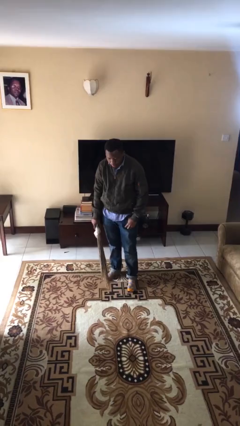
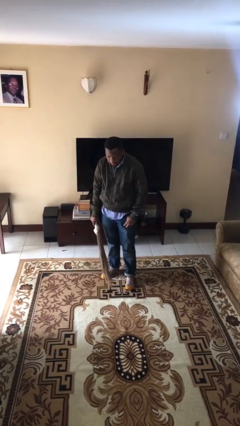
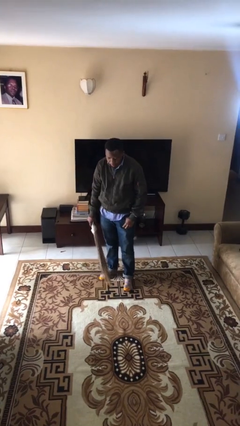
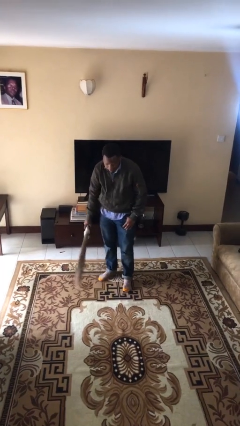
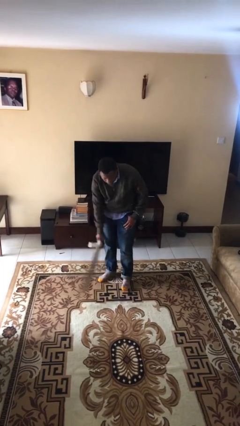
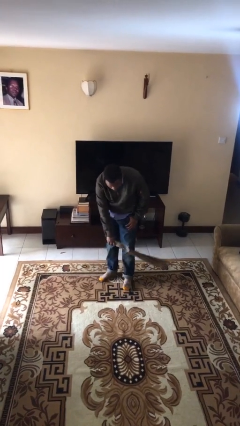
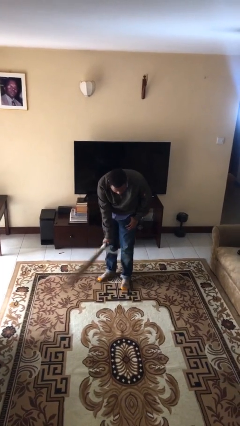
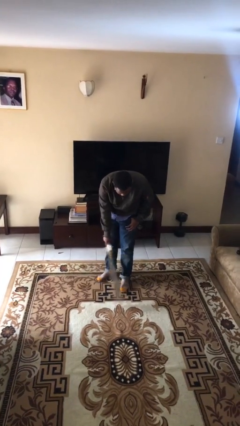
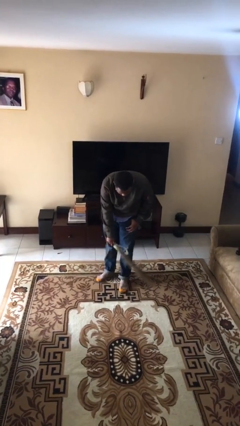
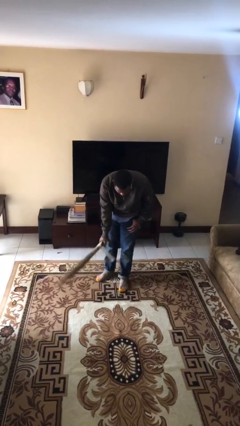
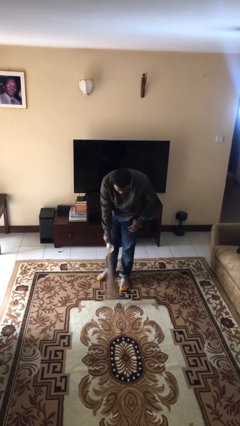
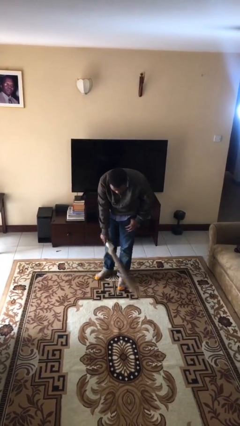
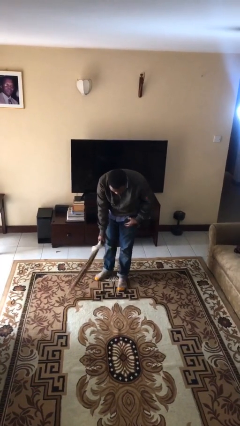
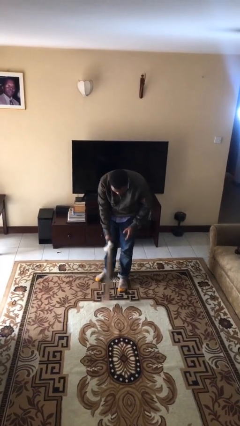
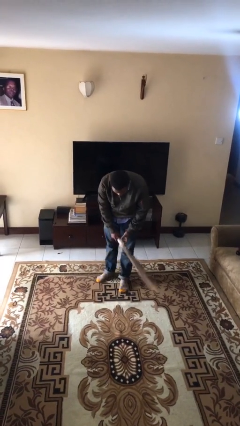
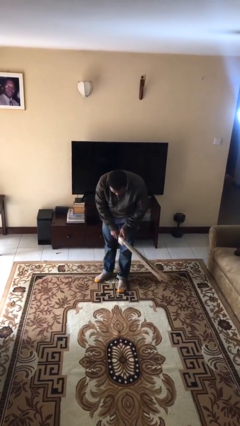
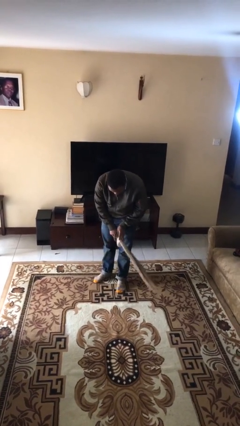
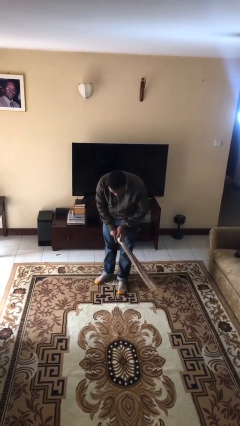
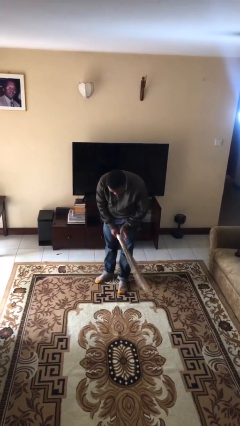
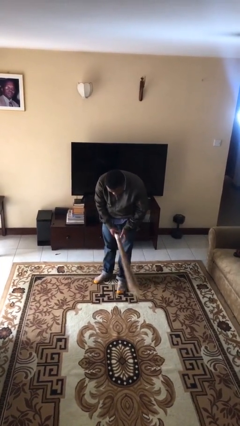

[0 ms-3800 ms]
person sweeps floor

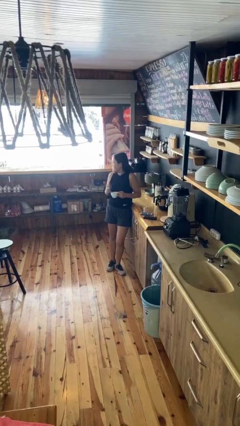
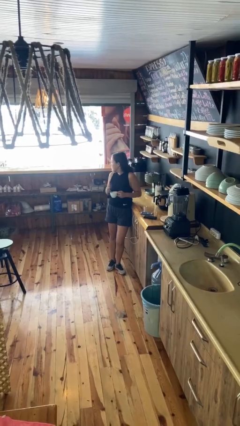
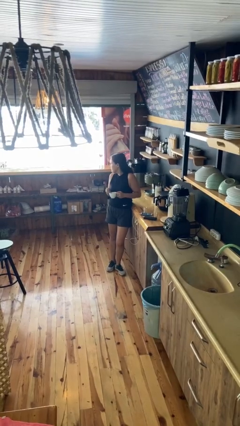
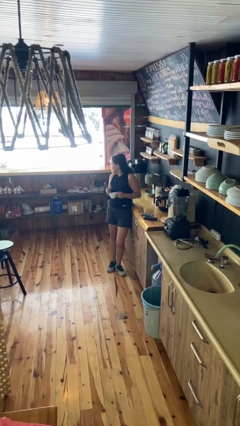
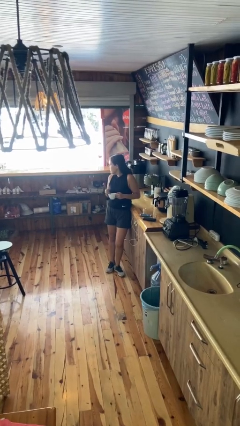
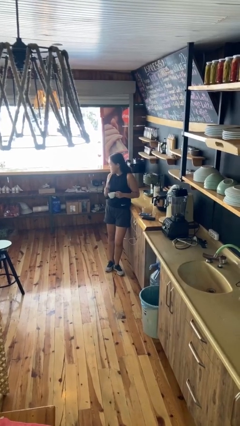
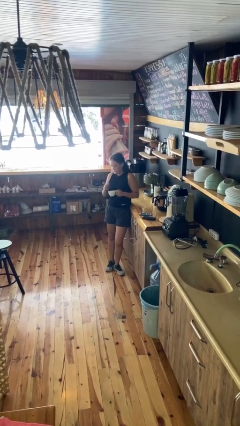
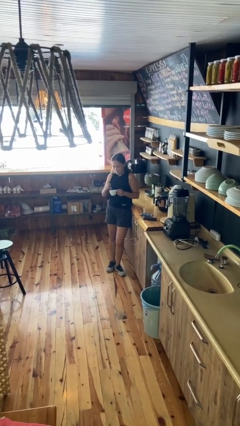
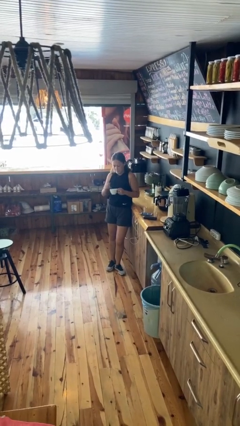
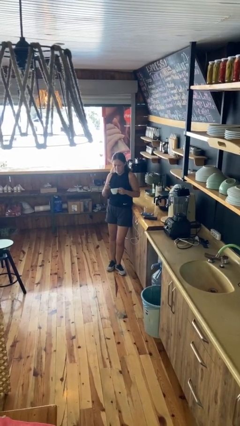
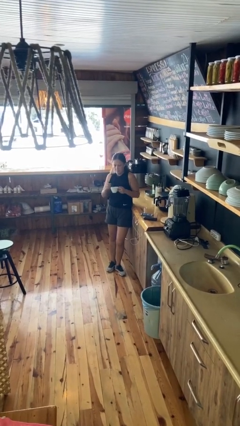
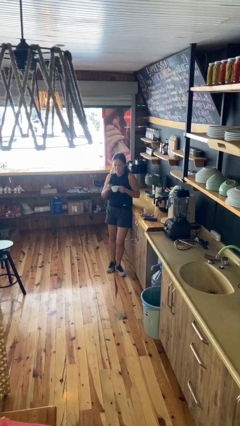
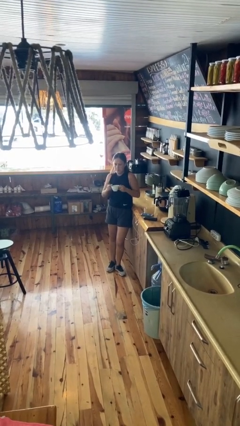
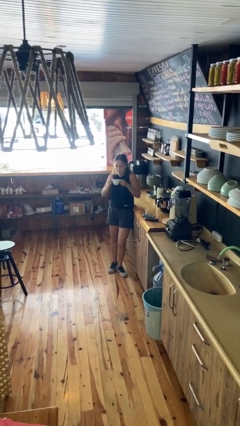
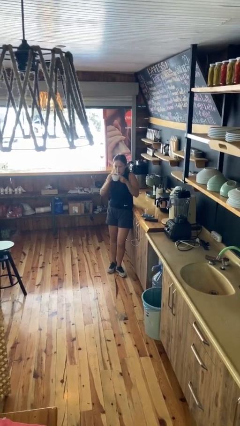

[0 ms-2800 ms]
person stirs mug

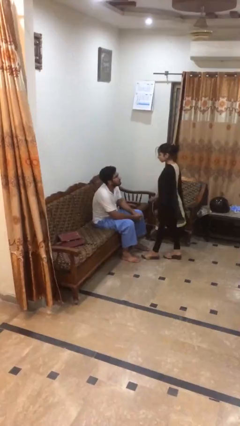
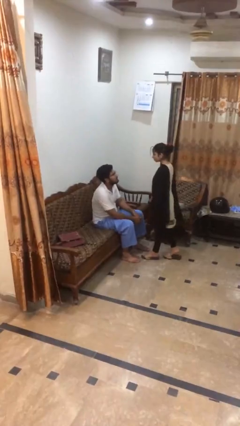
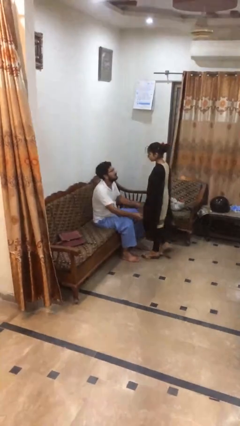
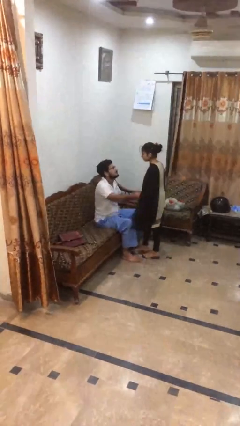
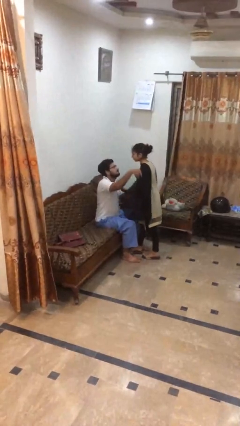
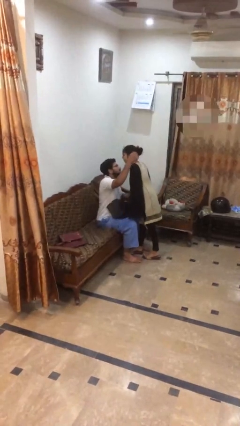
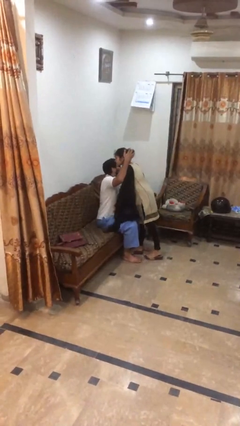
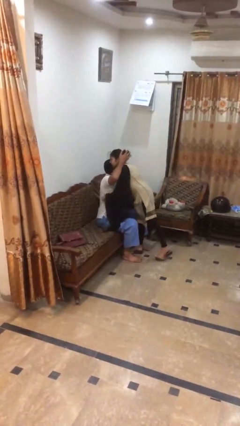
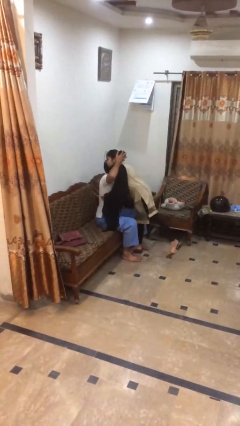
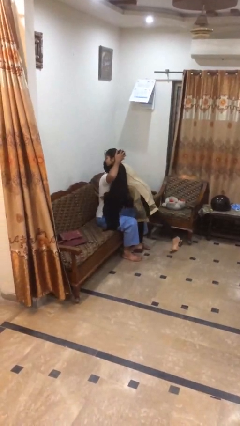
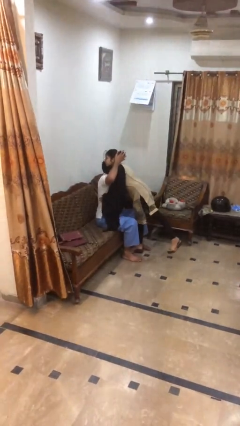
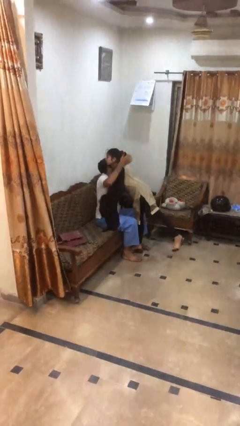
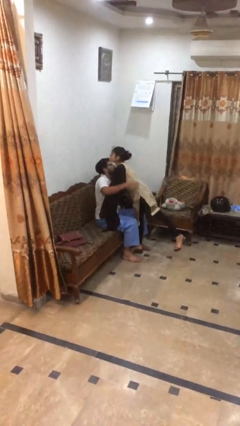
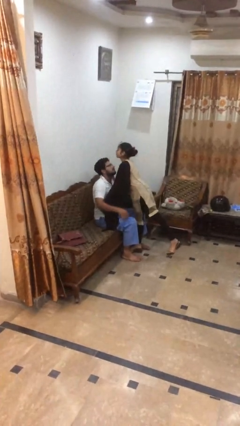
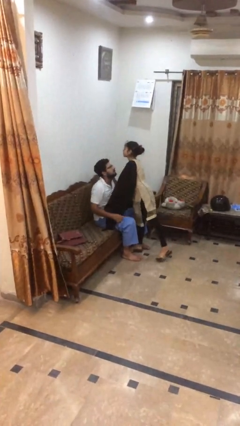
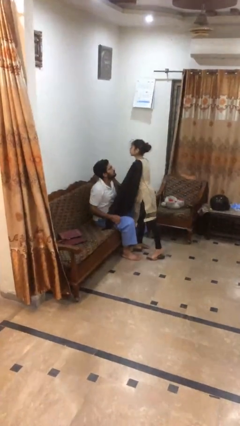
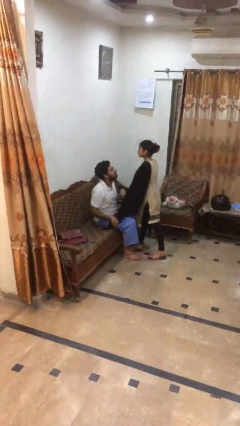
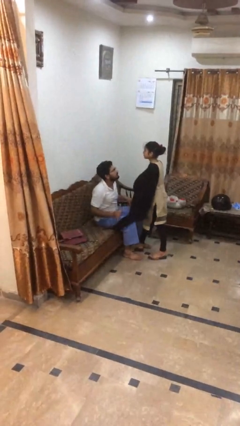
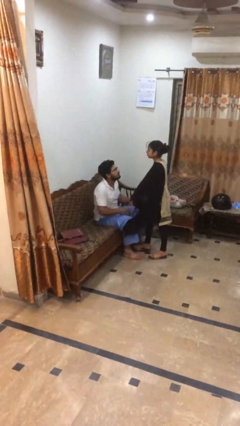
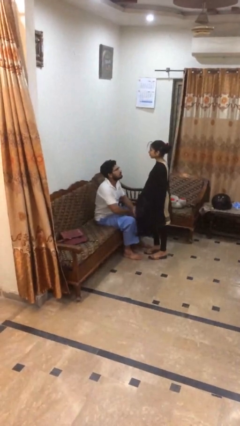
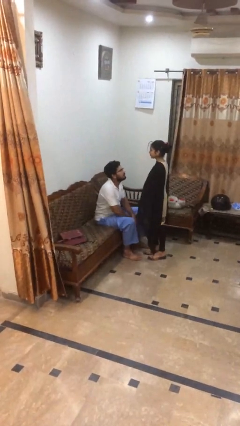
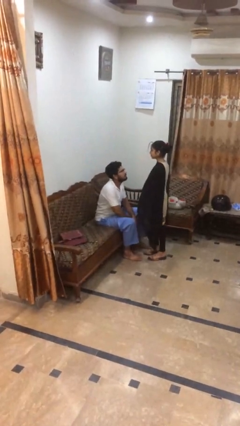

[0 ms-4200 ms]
person embraces person

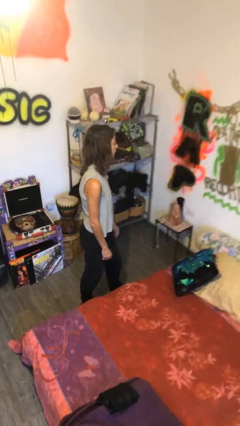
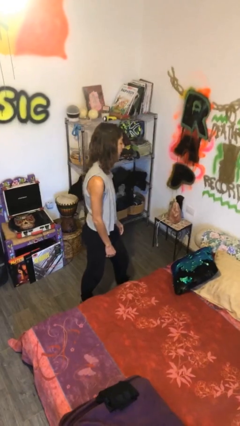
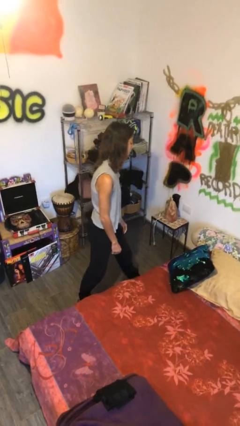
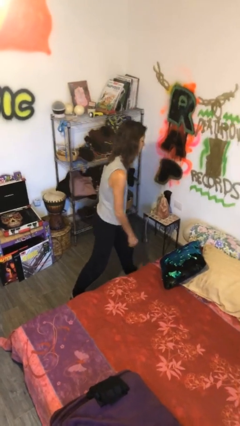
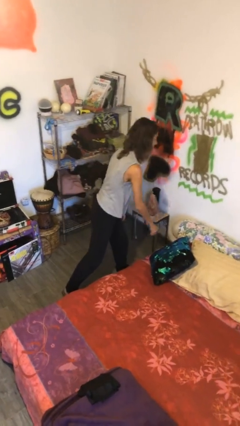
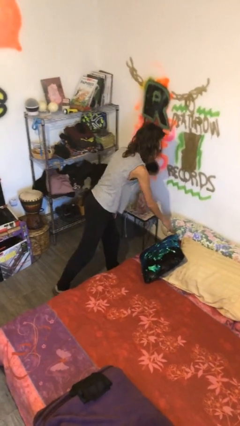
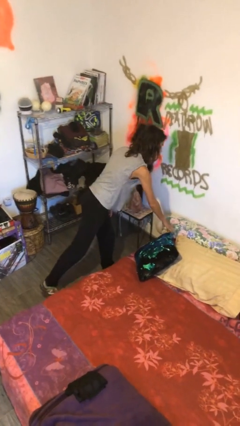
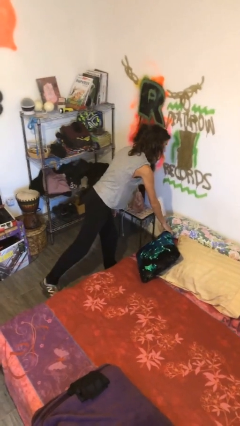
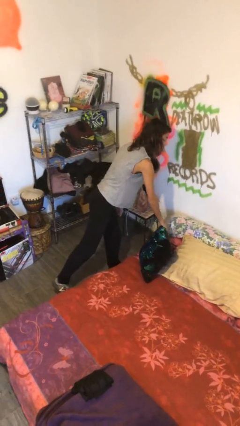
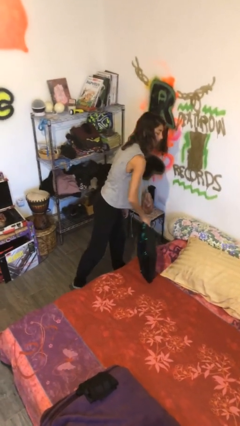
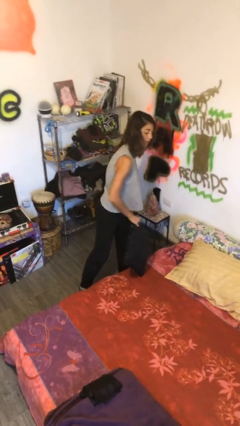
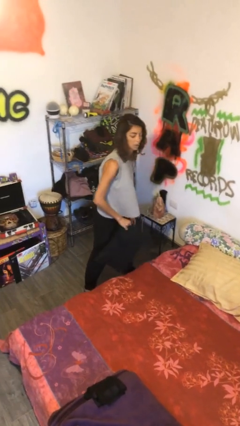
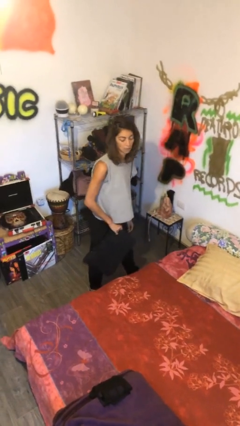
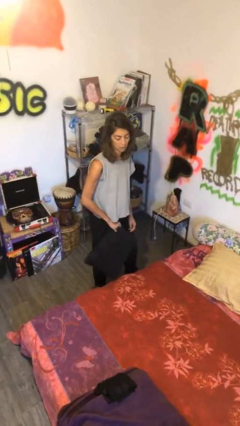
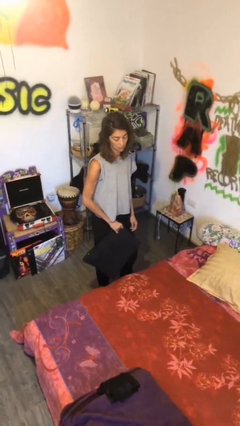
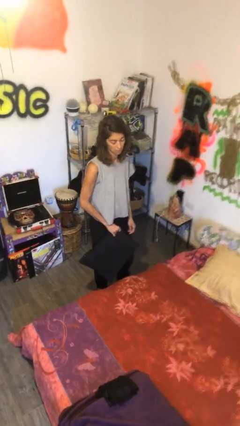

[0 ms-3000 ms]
person picks up object from bed

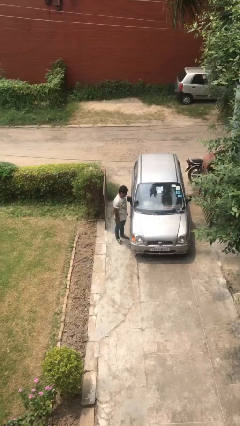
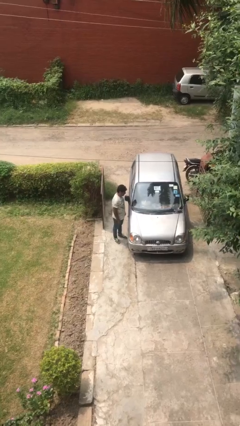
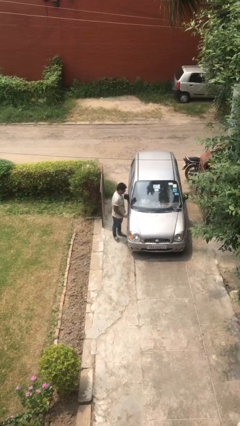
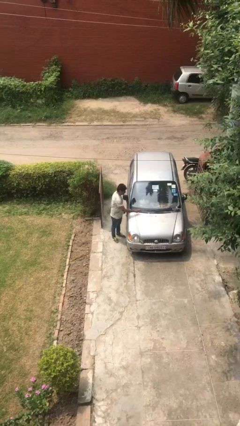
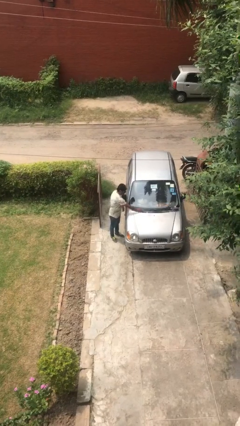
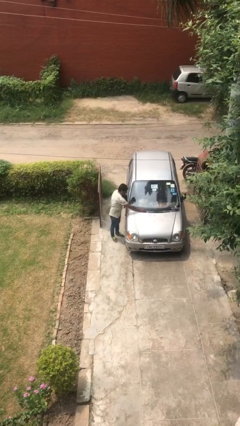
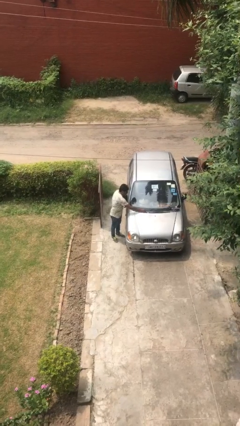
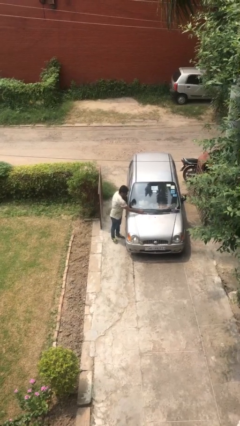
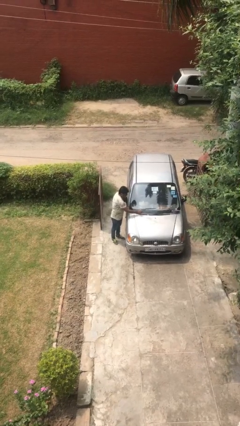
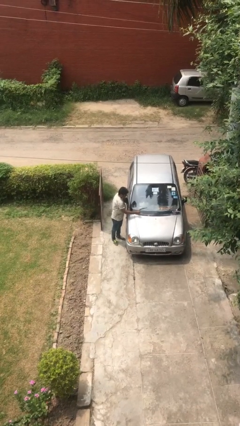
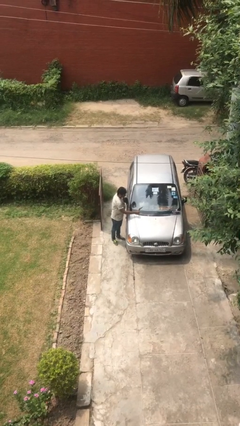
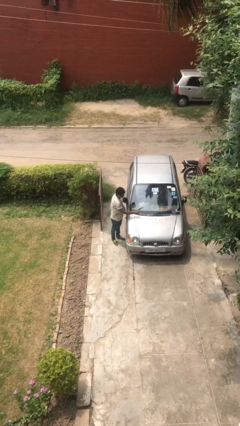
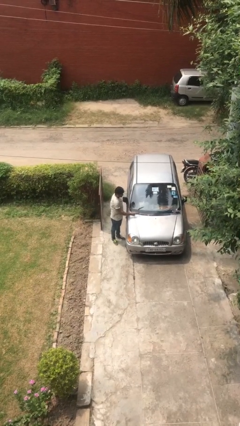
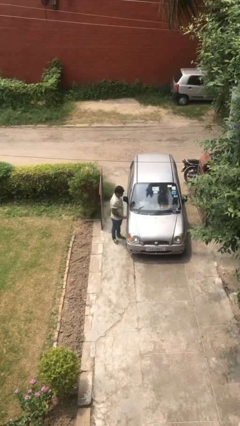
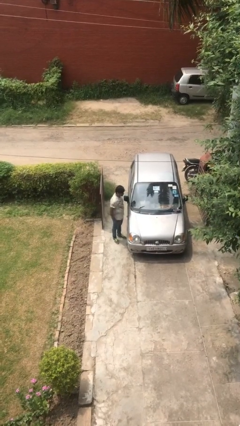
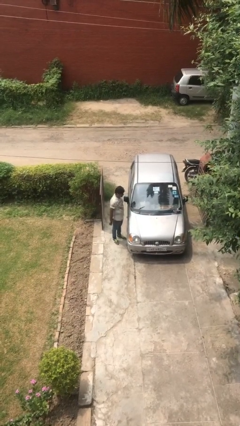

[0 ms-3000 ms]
person flips up car wipers

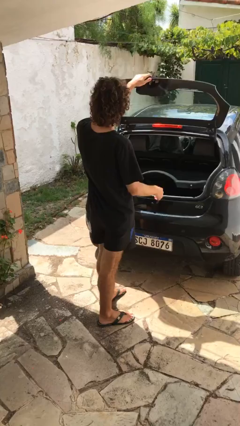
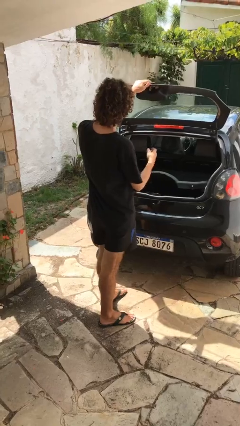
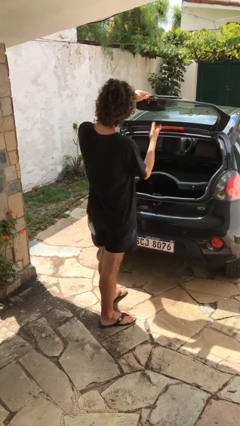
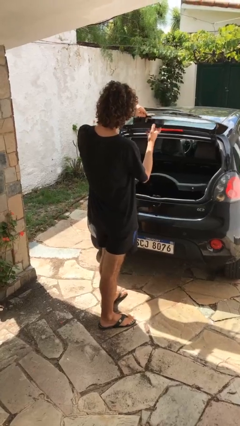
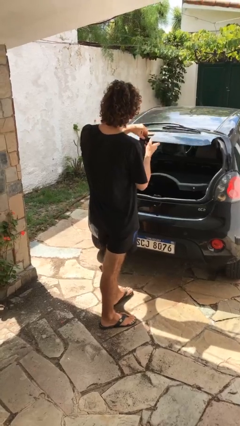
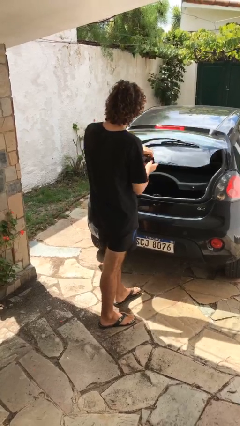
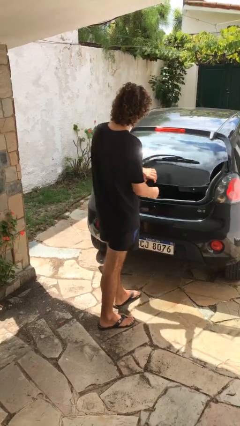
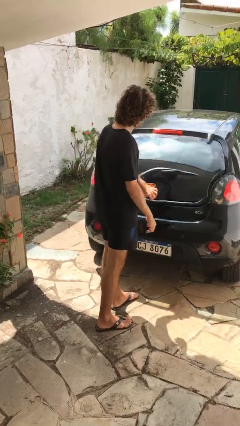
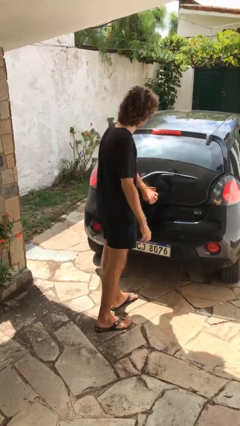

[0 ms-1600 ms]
person closes car trunk
